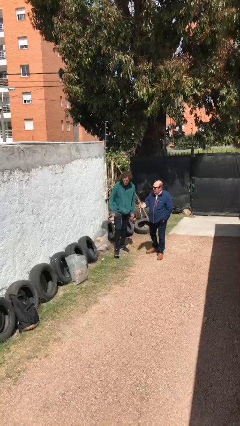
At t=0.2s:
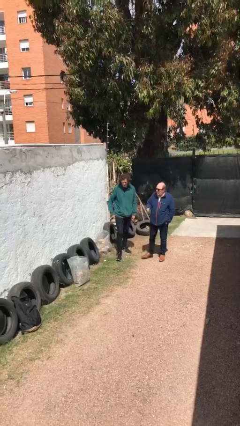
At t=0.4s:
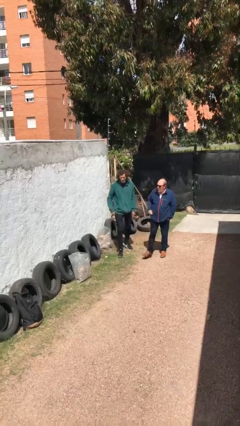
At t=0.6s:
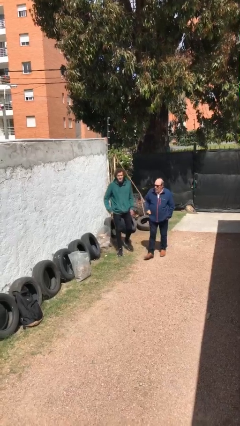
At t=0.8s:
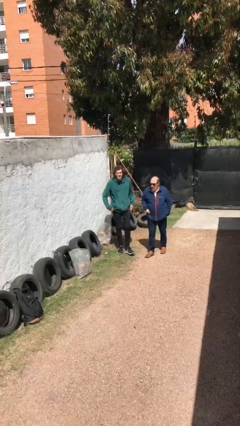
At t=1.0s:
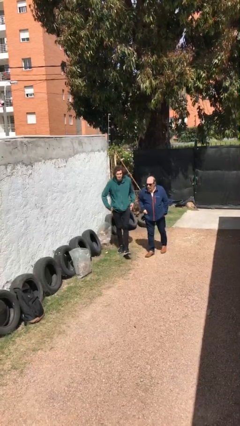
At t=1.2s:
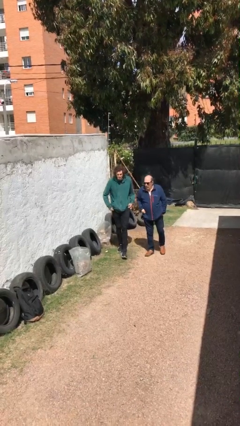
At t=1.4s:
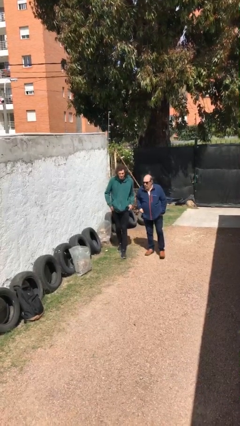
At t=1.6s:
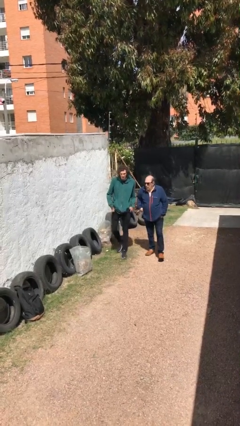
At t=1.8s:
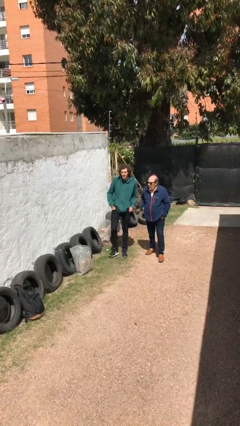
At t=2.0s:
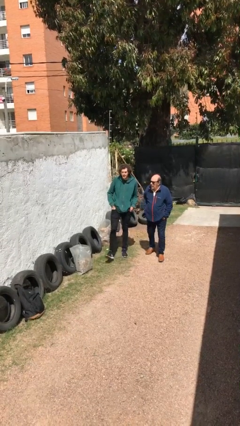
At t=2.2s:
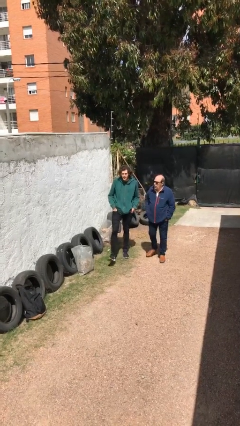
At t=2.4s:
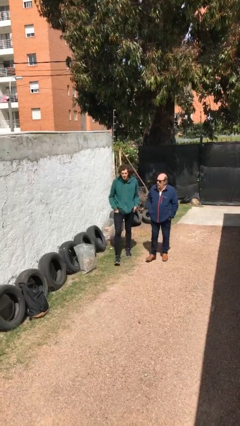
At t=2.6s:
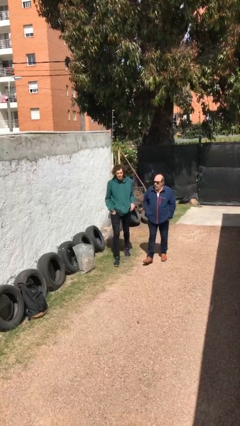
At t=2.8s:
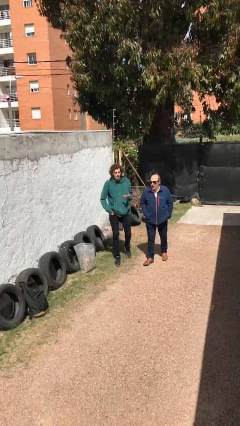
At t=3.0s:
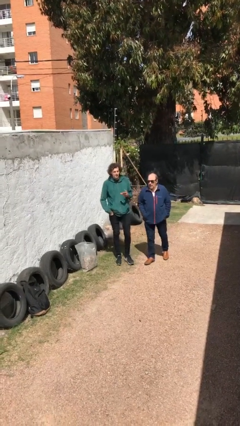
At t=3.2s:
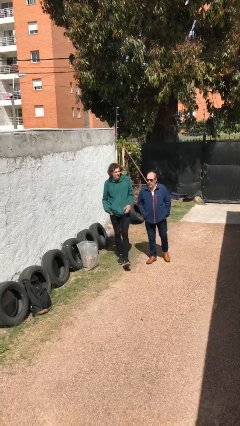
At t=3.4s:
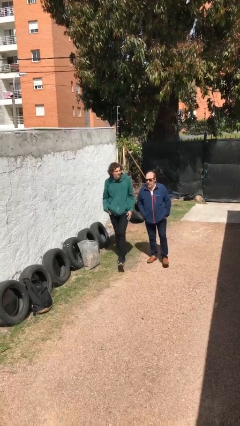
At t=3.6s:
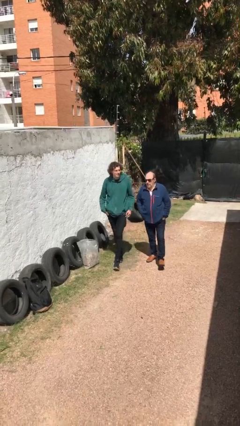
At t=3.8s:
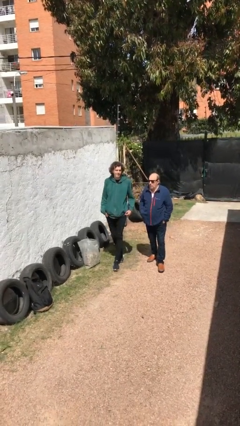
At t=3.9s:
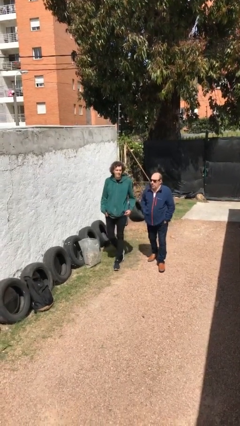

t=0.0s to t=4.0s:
person talks to person

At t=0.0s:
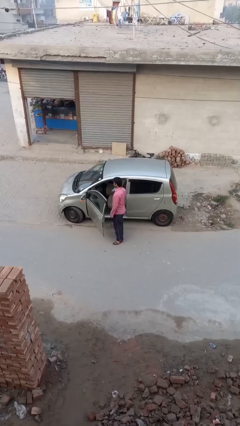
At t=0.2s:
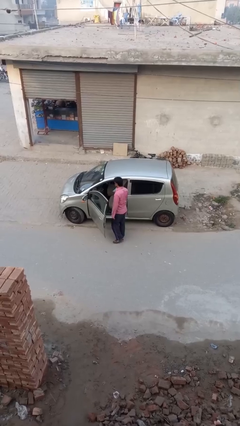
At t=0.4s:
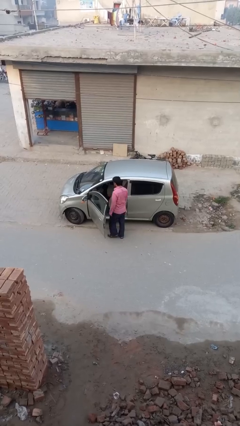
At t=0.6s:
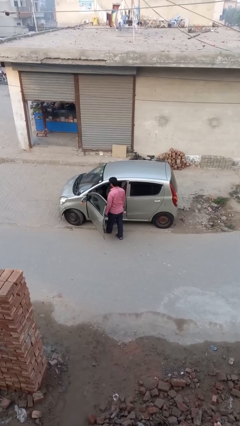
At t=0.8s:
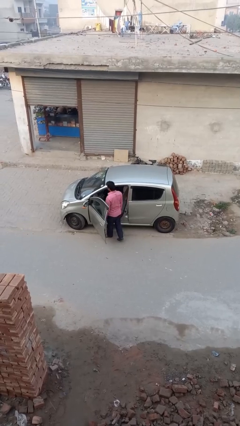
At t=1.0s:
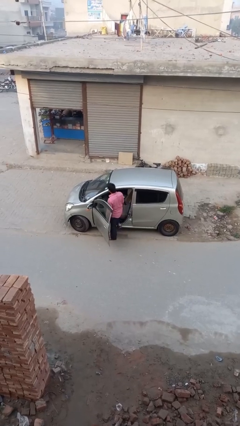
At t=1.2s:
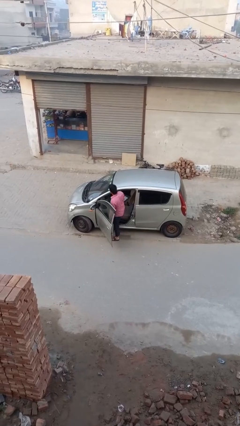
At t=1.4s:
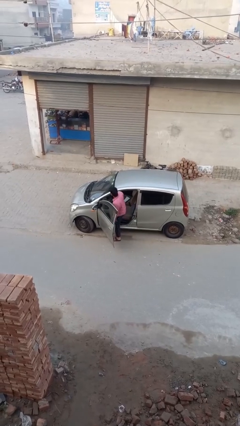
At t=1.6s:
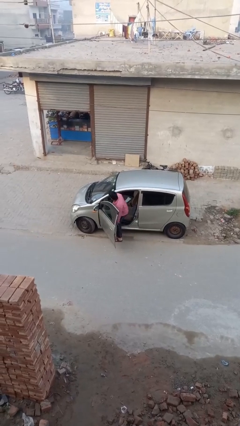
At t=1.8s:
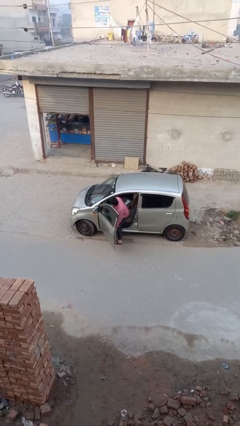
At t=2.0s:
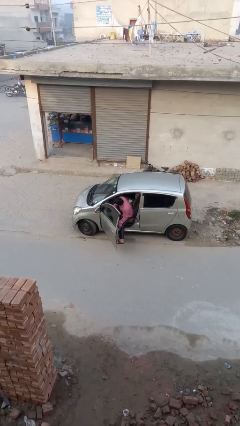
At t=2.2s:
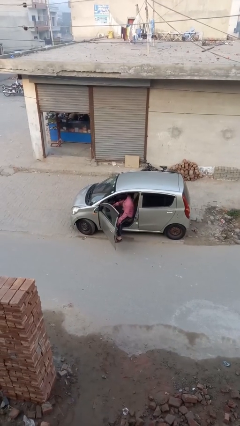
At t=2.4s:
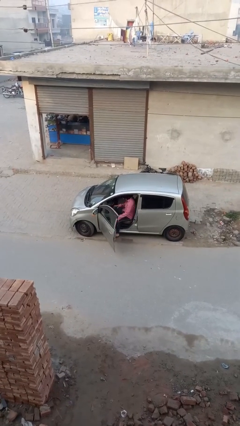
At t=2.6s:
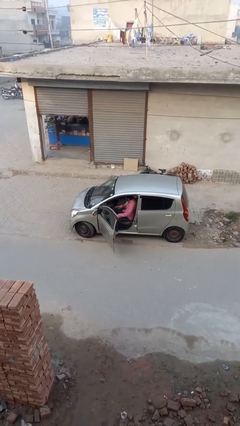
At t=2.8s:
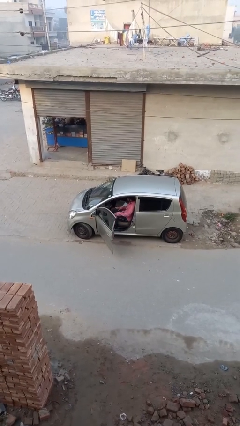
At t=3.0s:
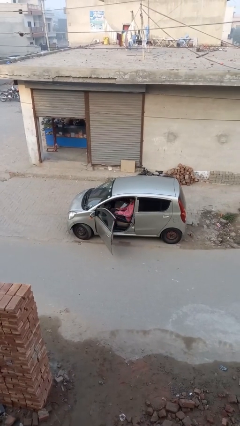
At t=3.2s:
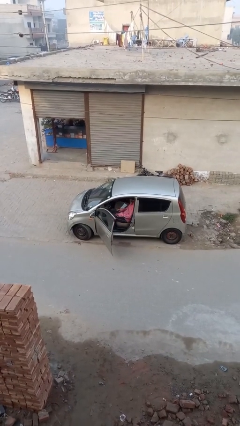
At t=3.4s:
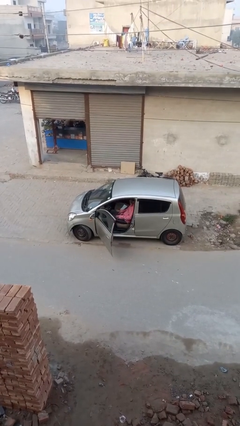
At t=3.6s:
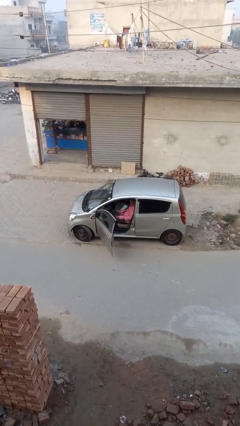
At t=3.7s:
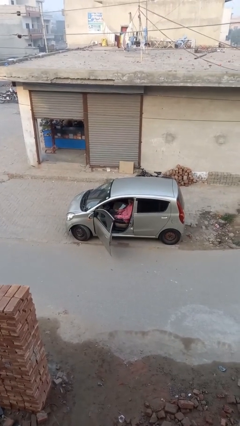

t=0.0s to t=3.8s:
person enters car

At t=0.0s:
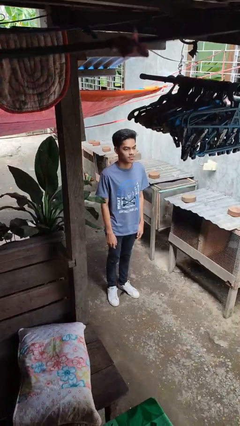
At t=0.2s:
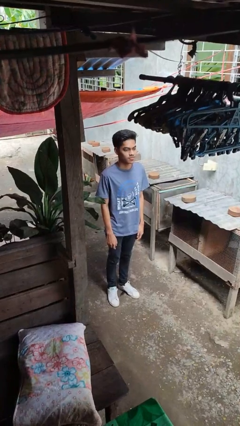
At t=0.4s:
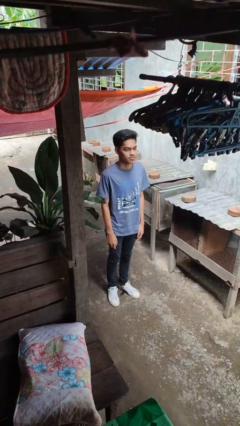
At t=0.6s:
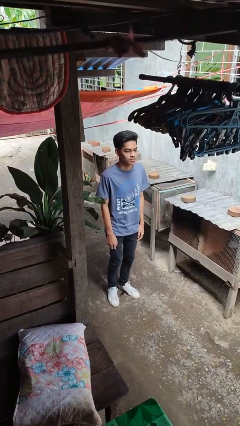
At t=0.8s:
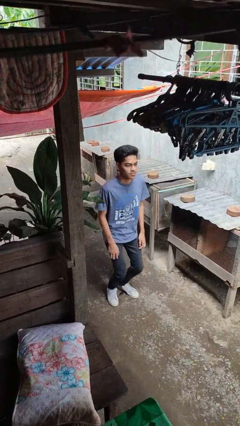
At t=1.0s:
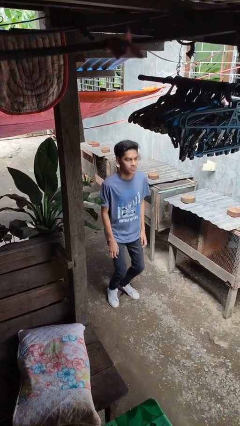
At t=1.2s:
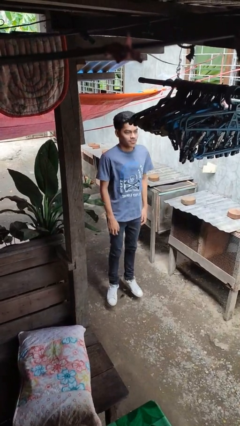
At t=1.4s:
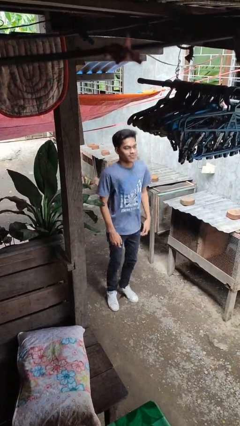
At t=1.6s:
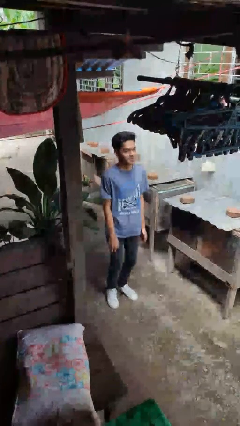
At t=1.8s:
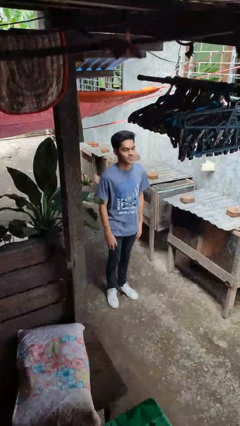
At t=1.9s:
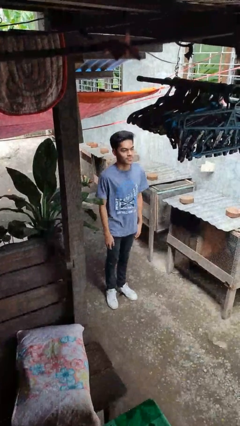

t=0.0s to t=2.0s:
person jumps

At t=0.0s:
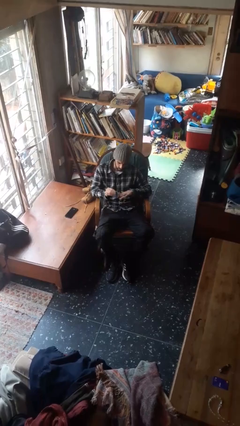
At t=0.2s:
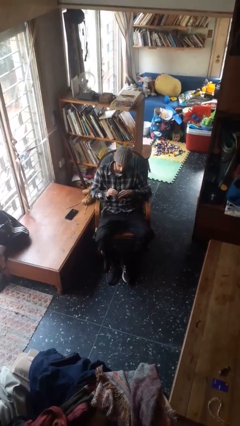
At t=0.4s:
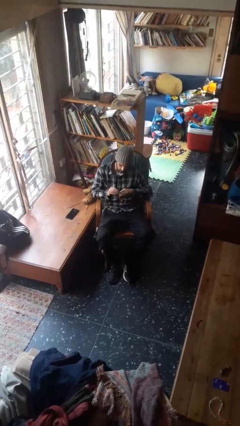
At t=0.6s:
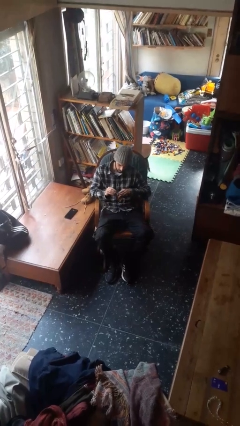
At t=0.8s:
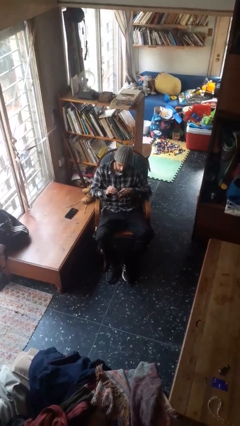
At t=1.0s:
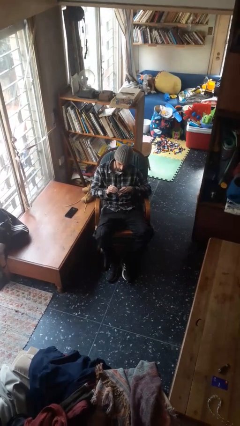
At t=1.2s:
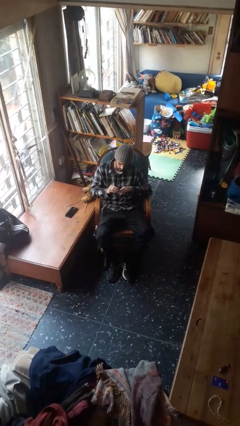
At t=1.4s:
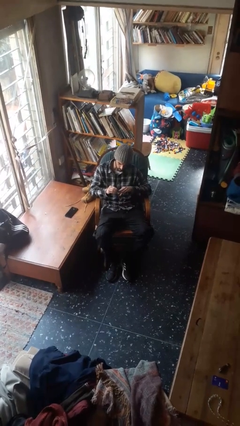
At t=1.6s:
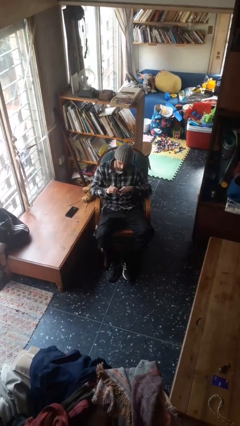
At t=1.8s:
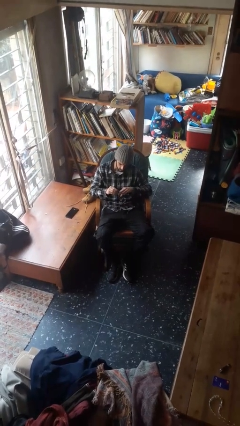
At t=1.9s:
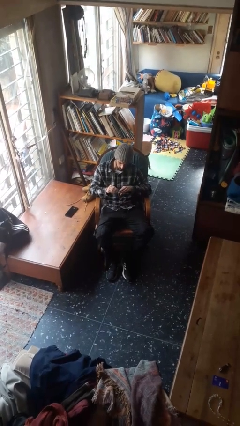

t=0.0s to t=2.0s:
person files fingernails

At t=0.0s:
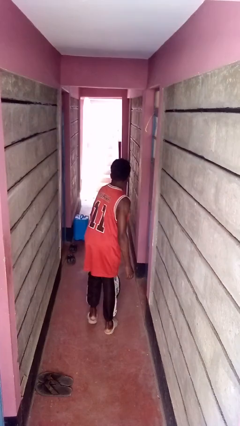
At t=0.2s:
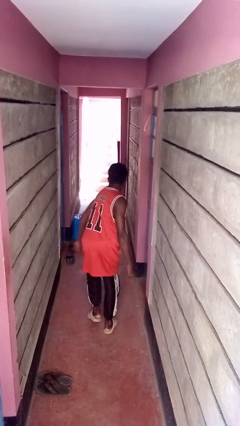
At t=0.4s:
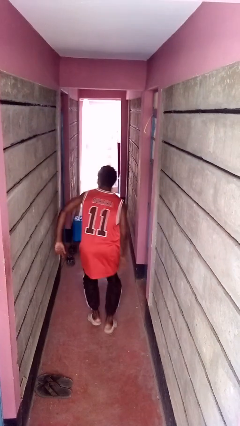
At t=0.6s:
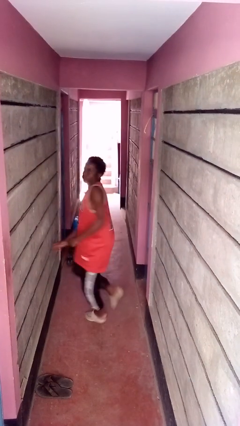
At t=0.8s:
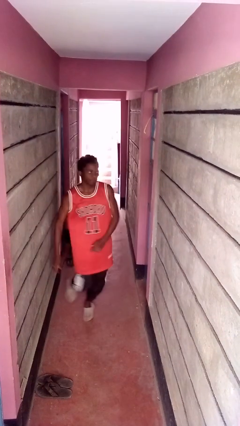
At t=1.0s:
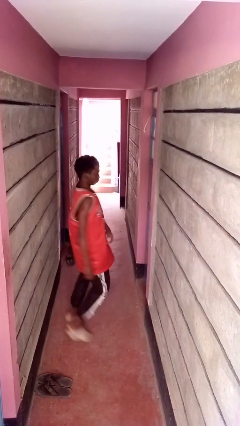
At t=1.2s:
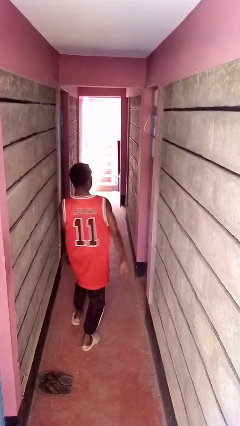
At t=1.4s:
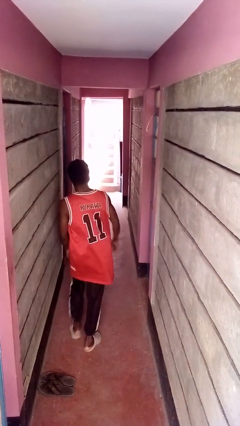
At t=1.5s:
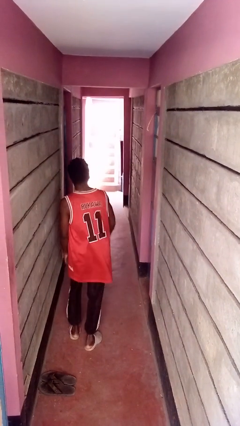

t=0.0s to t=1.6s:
person twirls

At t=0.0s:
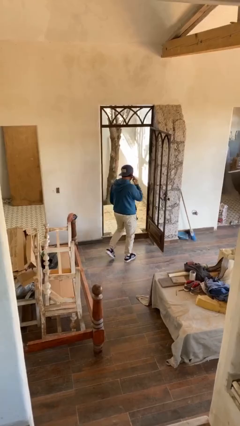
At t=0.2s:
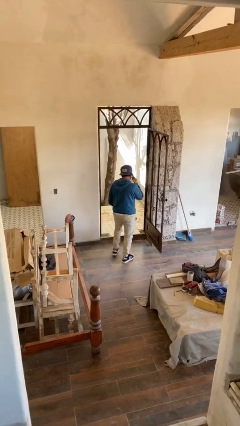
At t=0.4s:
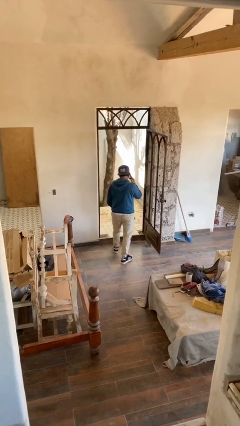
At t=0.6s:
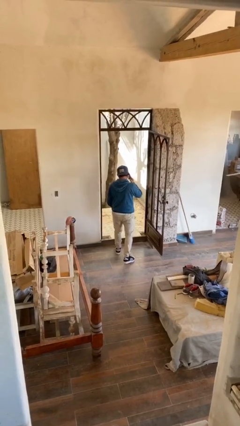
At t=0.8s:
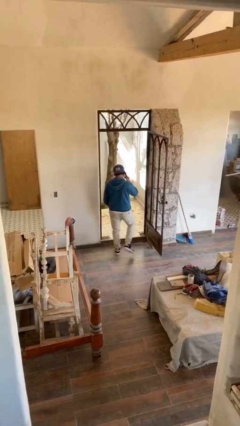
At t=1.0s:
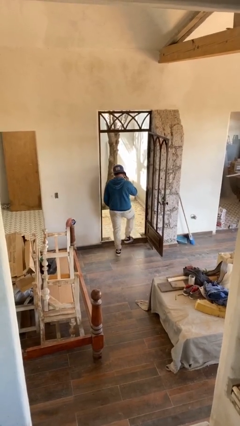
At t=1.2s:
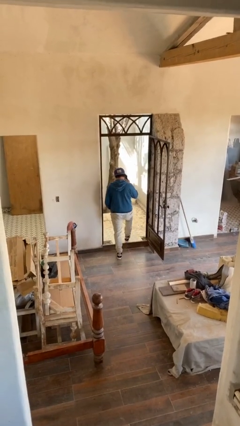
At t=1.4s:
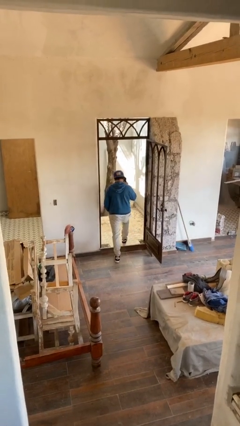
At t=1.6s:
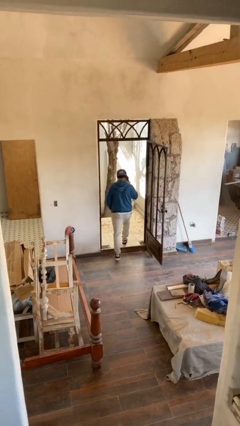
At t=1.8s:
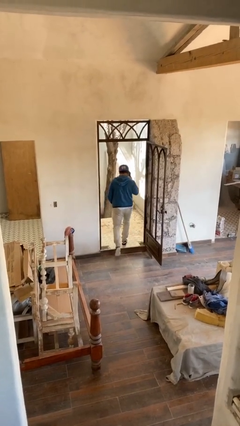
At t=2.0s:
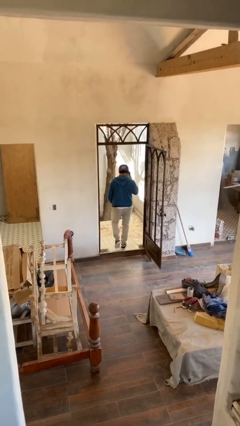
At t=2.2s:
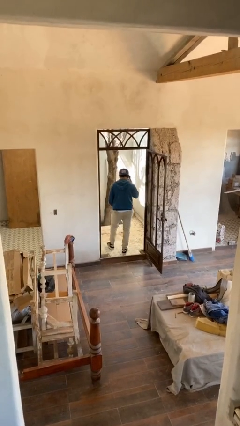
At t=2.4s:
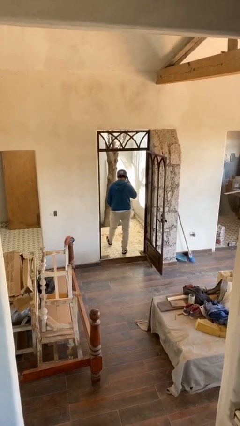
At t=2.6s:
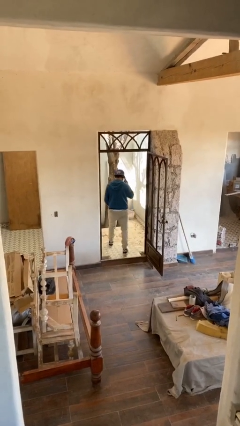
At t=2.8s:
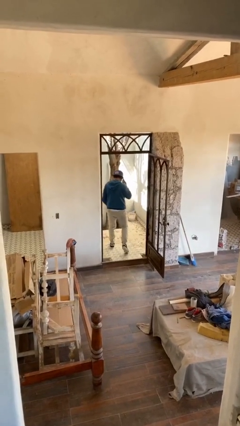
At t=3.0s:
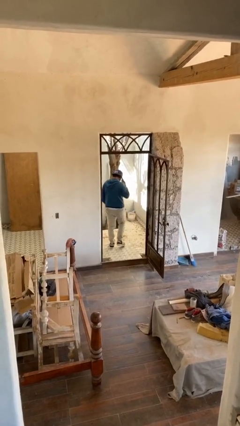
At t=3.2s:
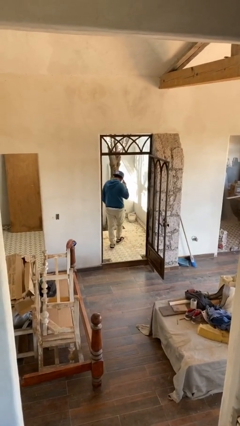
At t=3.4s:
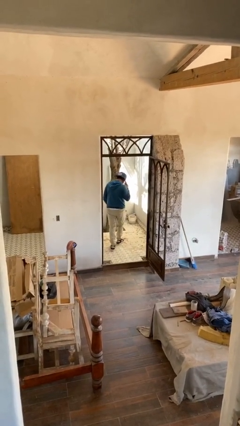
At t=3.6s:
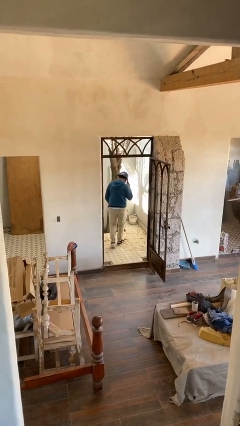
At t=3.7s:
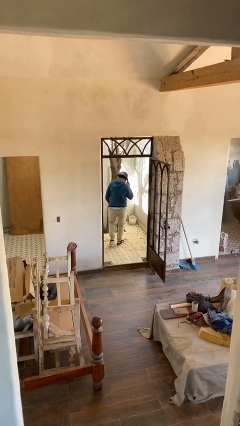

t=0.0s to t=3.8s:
person exits scene through structure

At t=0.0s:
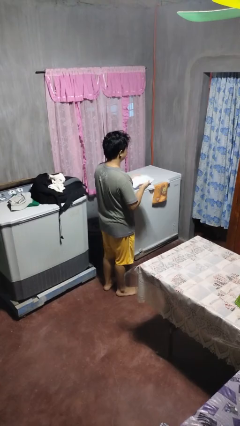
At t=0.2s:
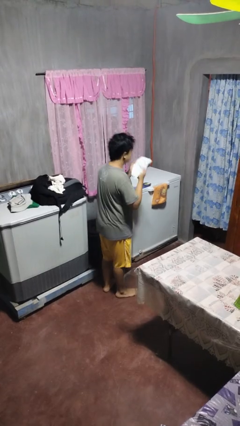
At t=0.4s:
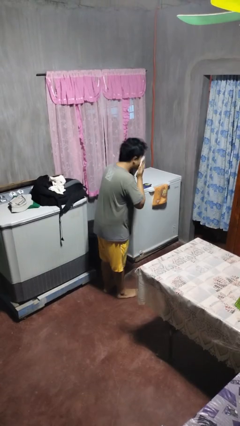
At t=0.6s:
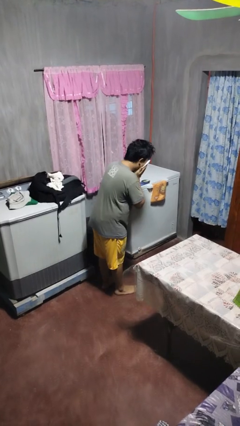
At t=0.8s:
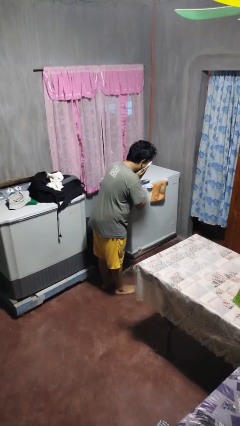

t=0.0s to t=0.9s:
person blows nose
